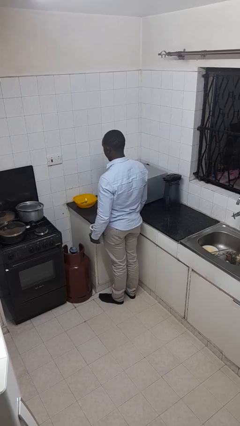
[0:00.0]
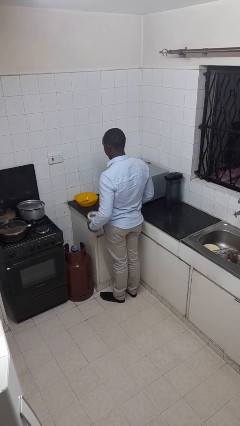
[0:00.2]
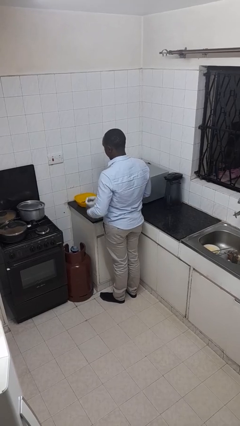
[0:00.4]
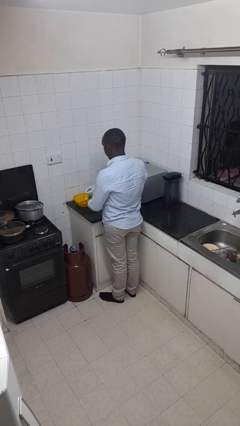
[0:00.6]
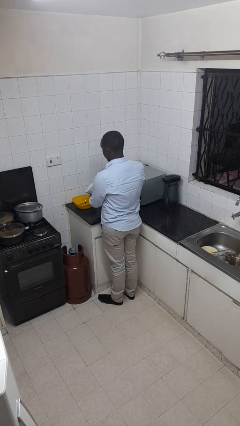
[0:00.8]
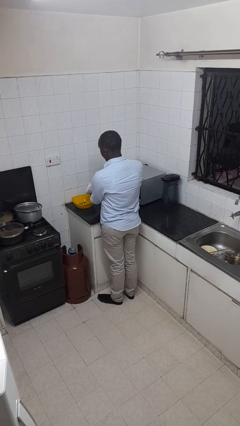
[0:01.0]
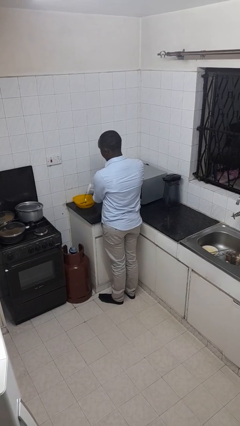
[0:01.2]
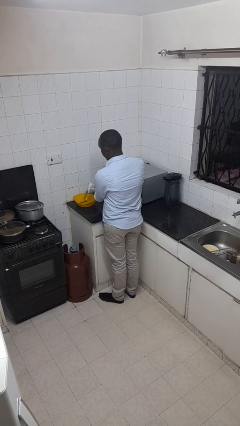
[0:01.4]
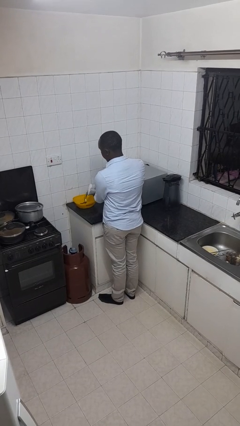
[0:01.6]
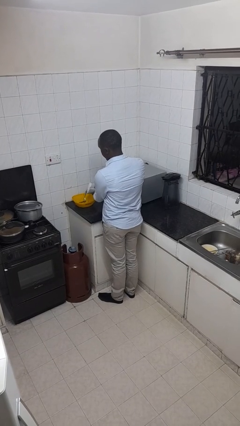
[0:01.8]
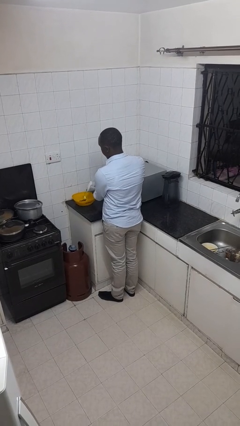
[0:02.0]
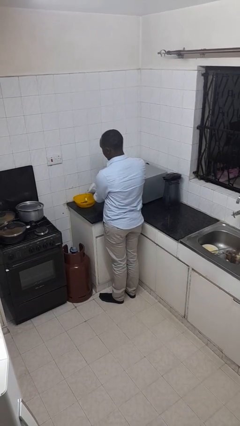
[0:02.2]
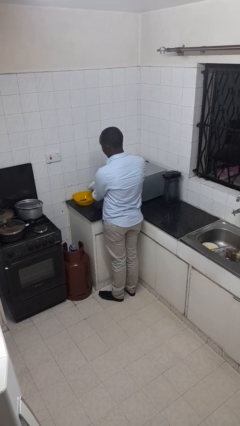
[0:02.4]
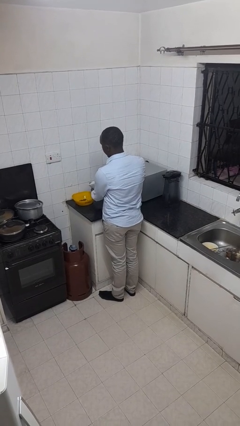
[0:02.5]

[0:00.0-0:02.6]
person pours into bowl

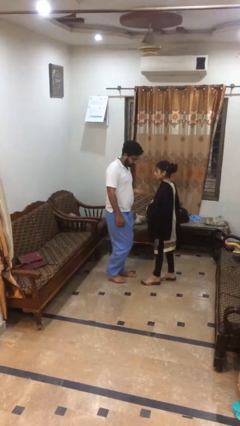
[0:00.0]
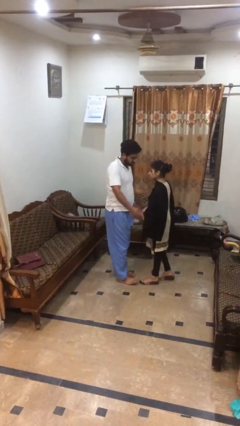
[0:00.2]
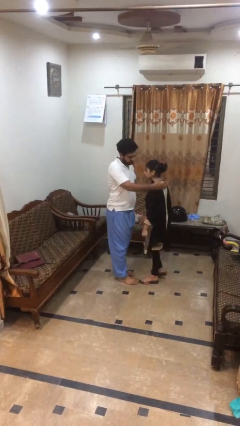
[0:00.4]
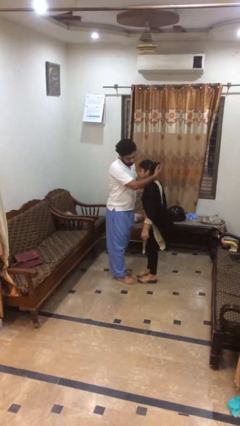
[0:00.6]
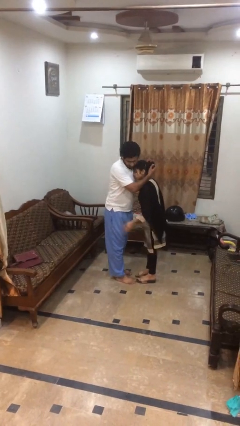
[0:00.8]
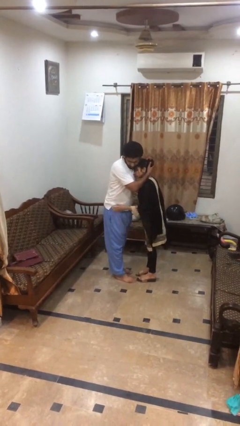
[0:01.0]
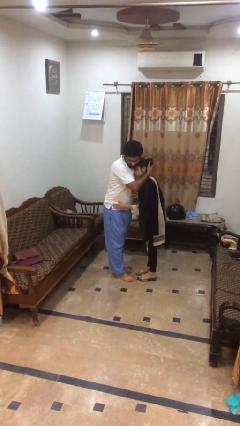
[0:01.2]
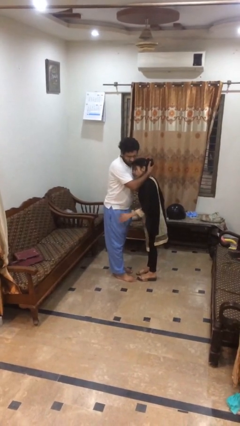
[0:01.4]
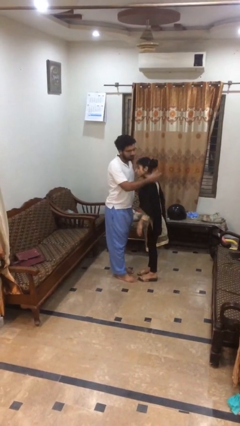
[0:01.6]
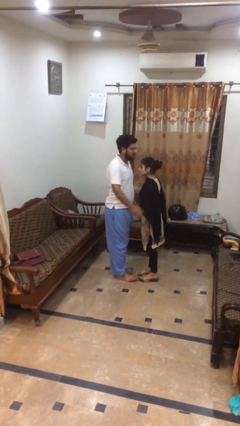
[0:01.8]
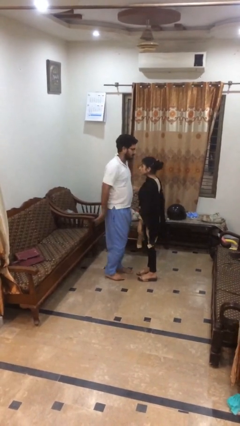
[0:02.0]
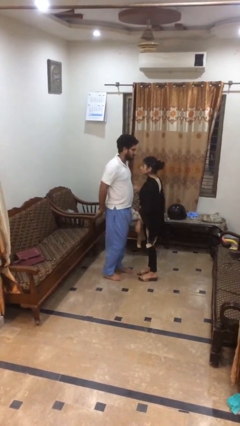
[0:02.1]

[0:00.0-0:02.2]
person embraces person

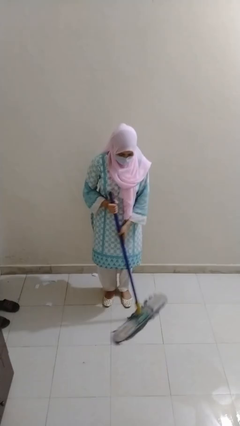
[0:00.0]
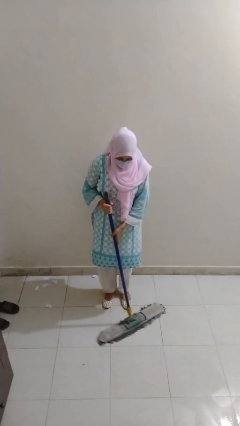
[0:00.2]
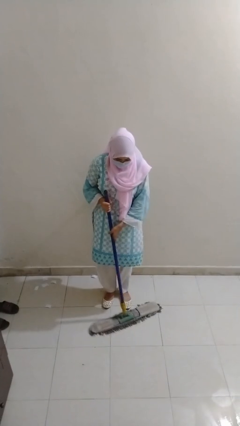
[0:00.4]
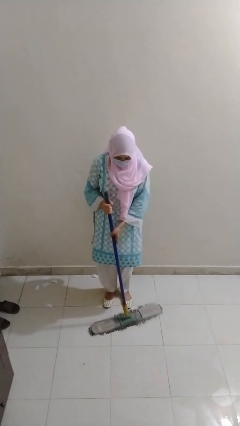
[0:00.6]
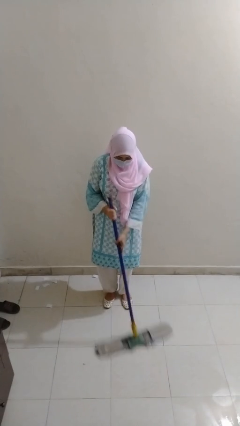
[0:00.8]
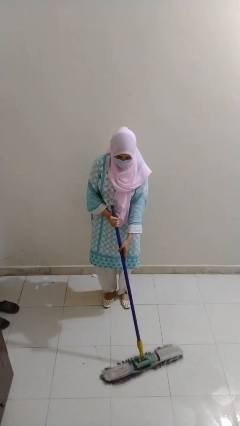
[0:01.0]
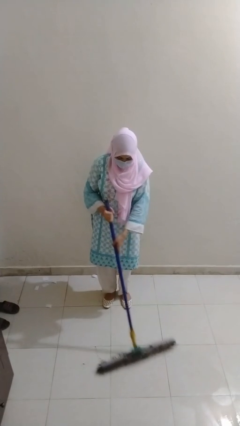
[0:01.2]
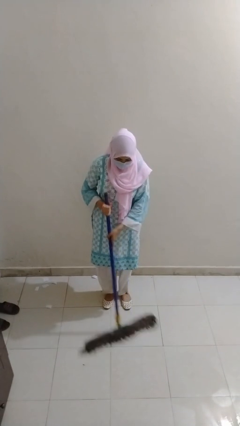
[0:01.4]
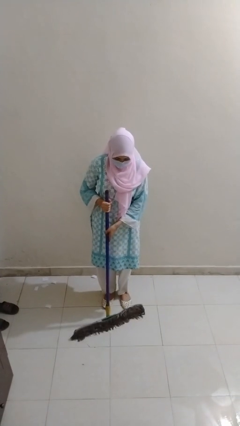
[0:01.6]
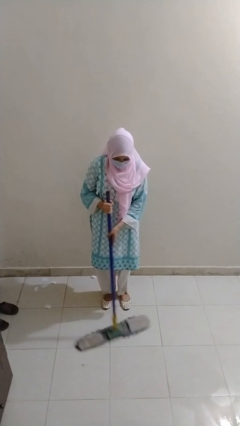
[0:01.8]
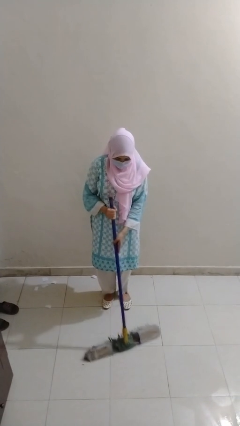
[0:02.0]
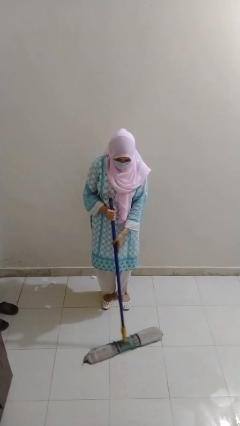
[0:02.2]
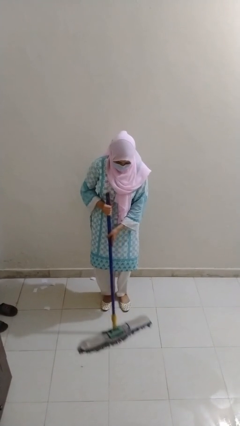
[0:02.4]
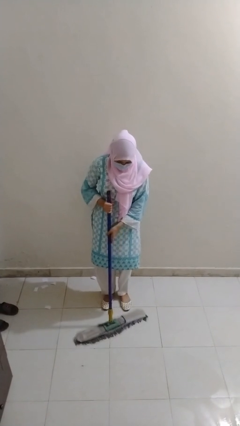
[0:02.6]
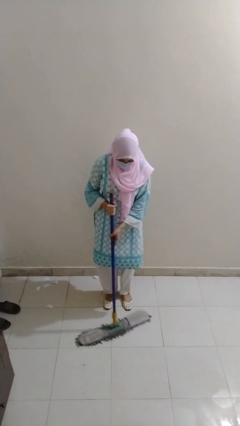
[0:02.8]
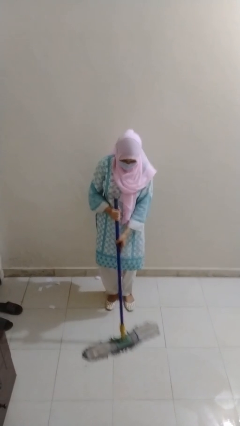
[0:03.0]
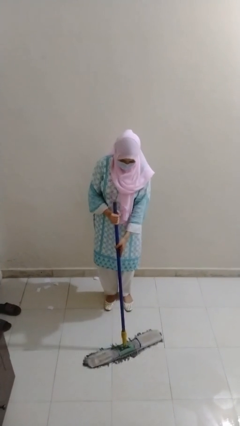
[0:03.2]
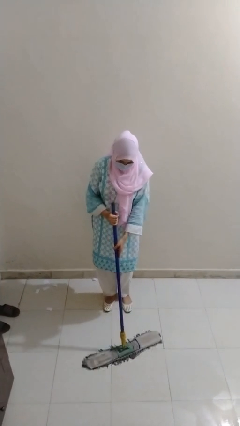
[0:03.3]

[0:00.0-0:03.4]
person mops

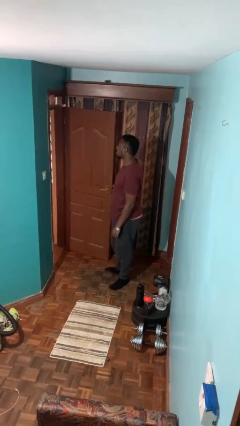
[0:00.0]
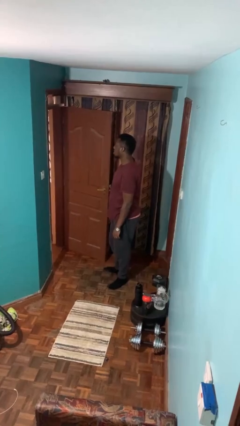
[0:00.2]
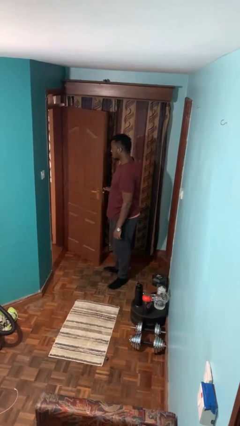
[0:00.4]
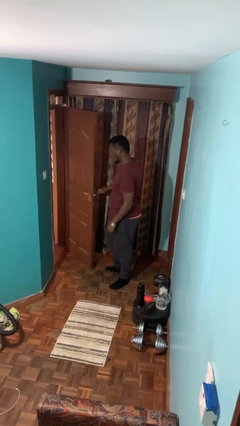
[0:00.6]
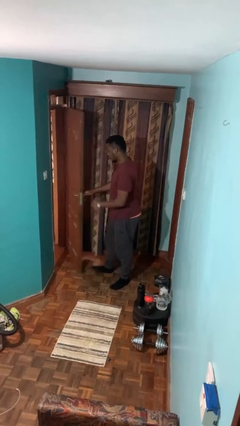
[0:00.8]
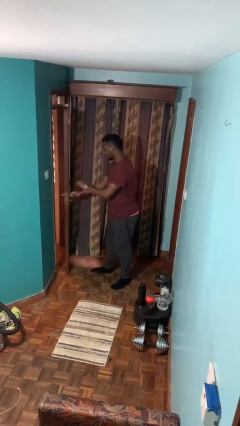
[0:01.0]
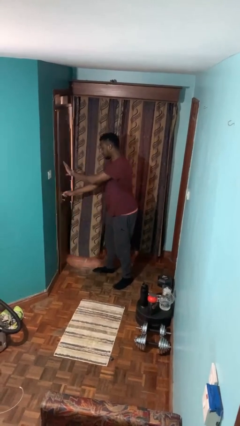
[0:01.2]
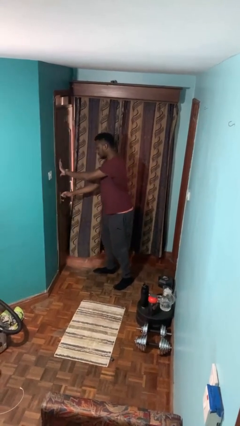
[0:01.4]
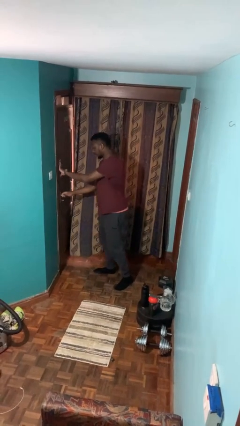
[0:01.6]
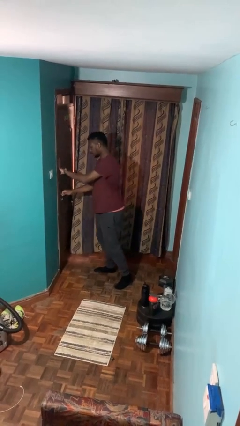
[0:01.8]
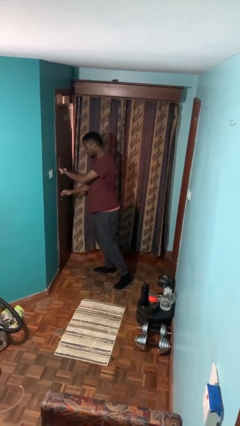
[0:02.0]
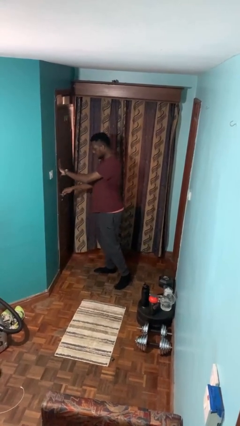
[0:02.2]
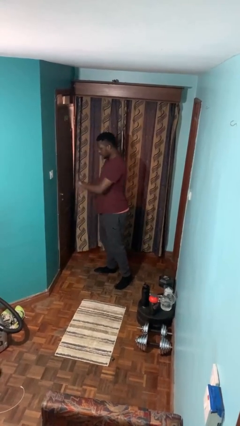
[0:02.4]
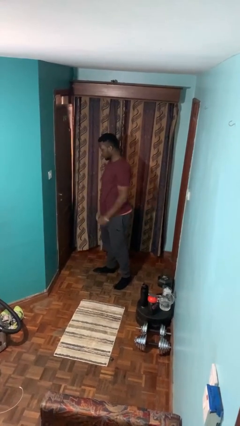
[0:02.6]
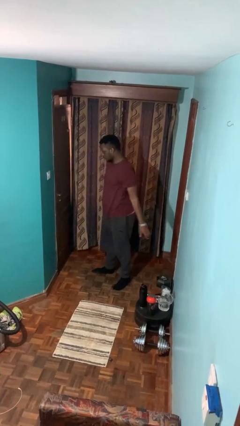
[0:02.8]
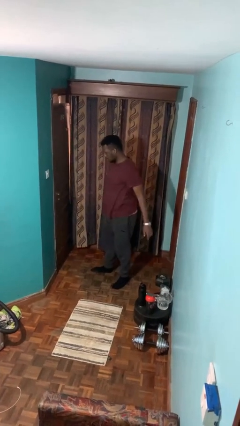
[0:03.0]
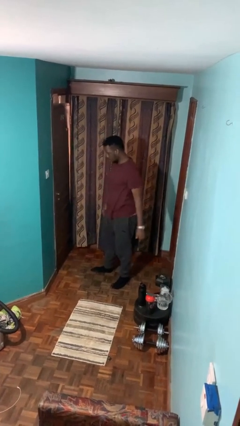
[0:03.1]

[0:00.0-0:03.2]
person closes facility door

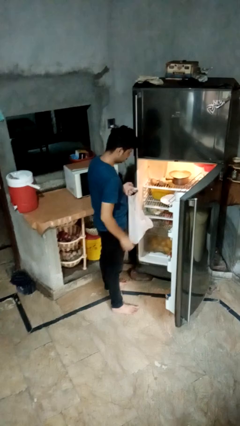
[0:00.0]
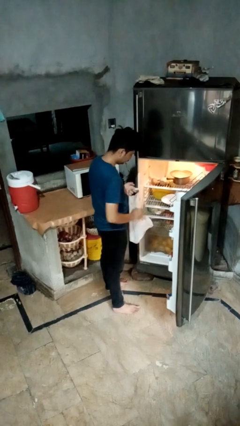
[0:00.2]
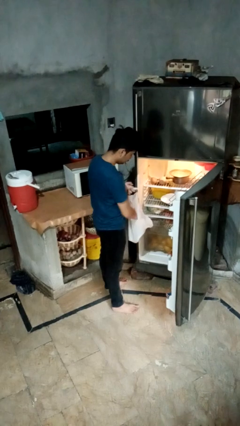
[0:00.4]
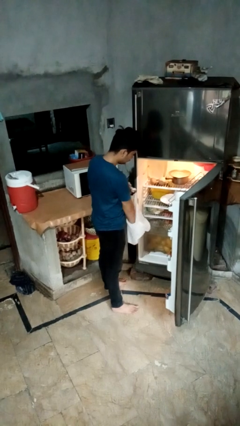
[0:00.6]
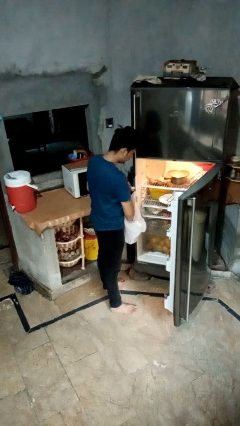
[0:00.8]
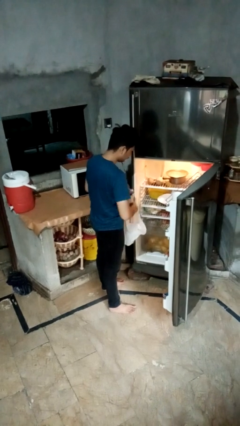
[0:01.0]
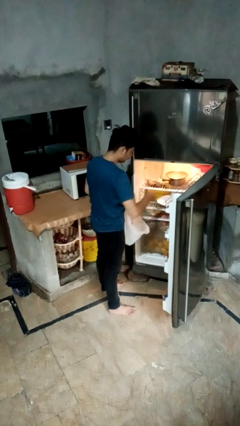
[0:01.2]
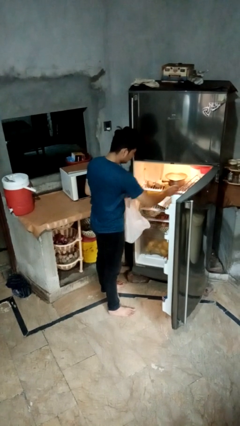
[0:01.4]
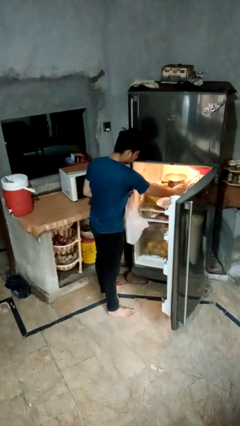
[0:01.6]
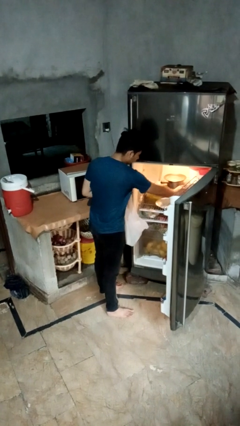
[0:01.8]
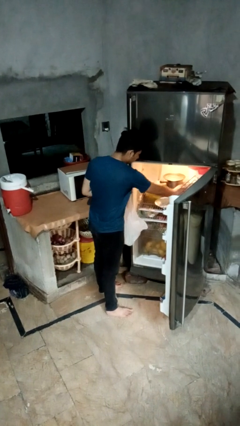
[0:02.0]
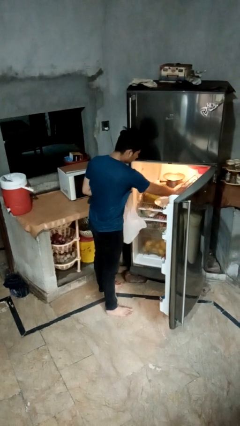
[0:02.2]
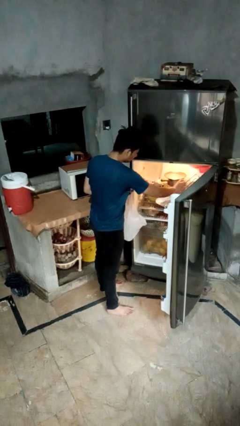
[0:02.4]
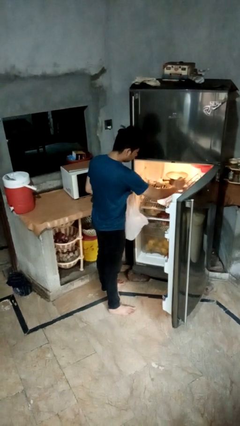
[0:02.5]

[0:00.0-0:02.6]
person loads groceries into refrigerator

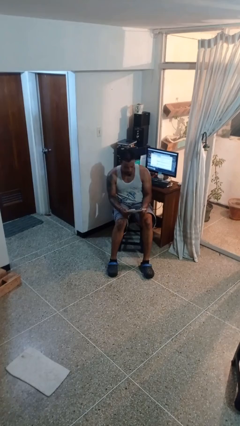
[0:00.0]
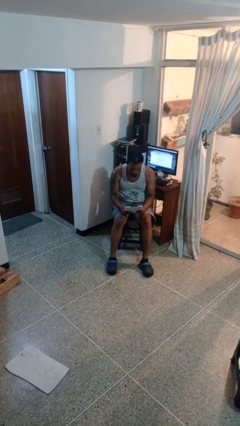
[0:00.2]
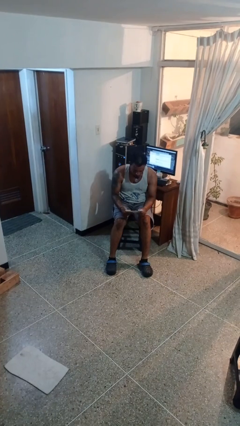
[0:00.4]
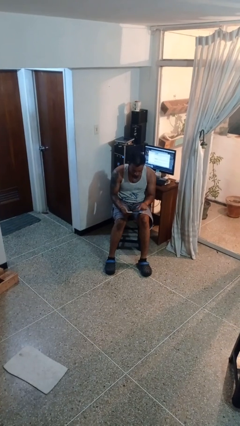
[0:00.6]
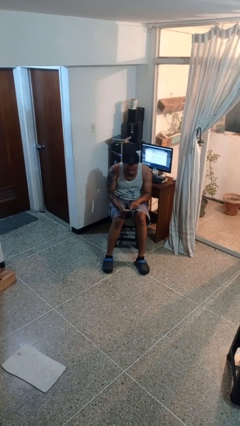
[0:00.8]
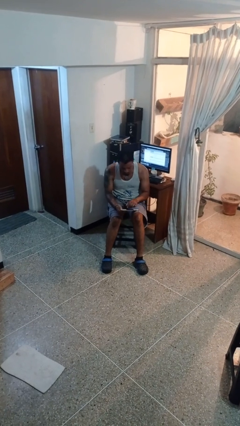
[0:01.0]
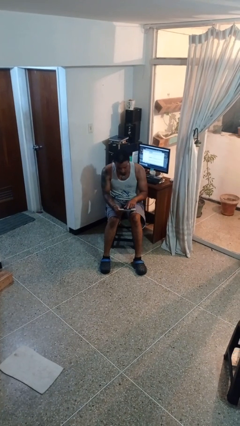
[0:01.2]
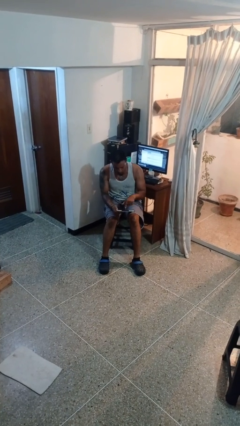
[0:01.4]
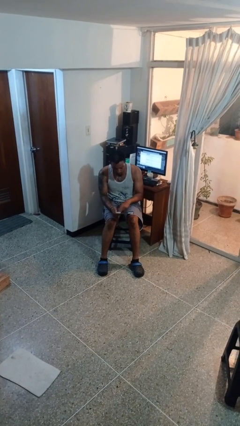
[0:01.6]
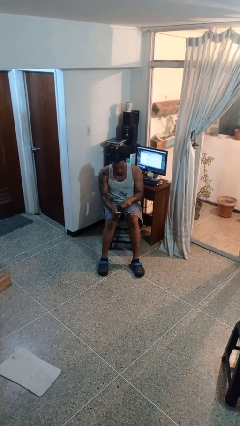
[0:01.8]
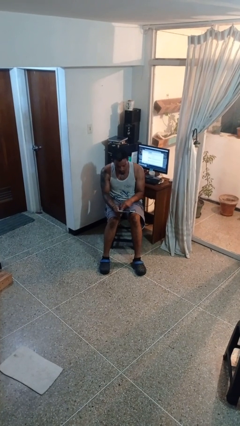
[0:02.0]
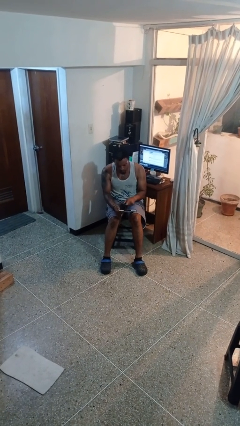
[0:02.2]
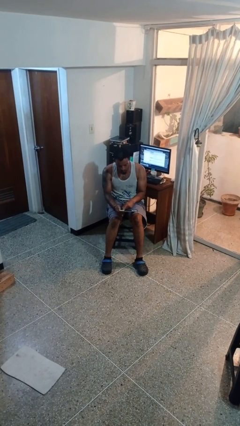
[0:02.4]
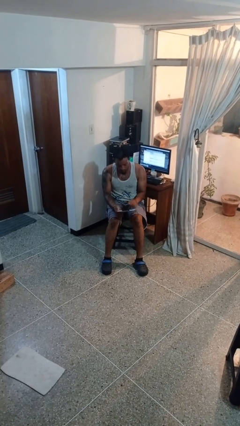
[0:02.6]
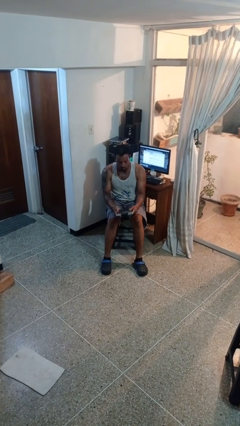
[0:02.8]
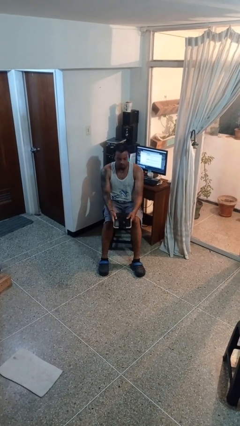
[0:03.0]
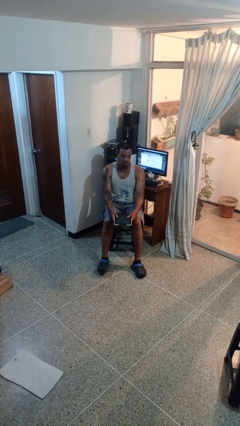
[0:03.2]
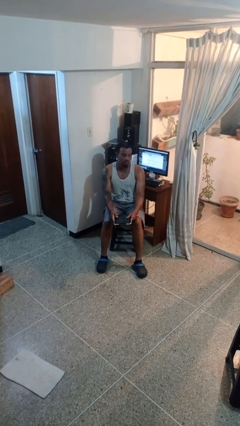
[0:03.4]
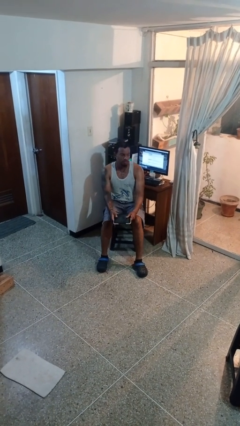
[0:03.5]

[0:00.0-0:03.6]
person interacts with tablet
